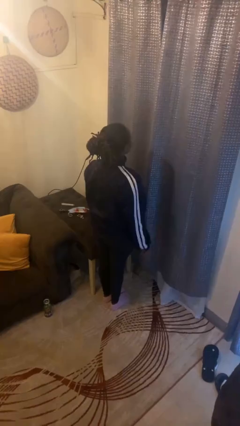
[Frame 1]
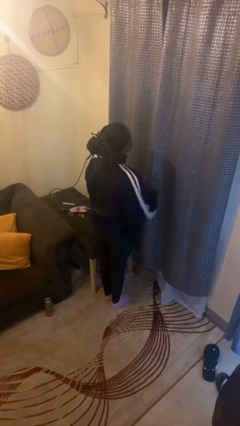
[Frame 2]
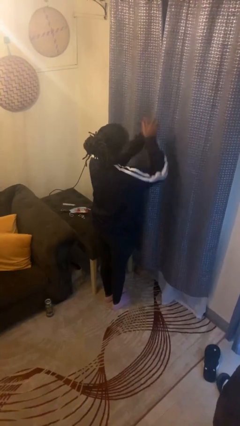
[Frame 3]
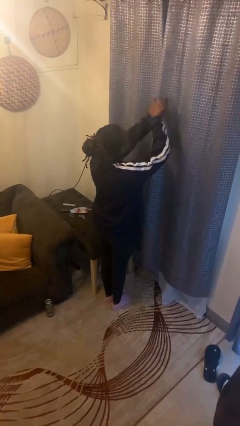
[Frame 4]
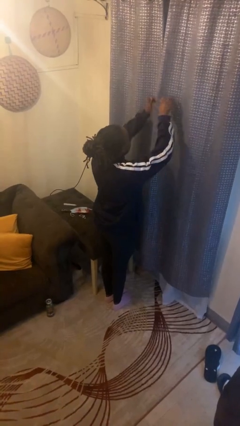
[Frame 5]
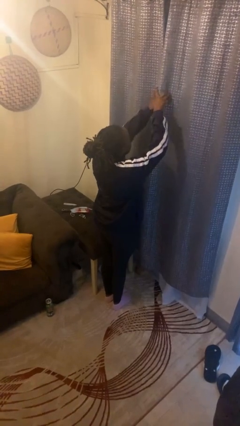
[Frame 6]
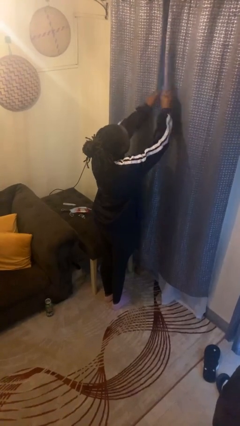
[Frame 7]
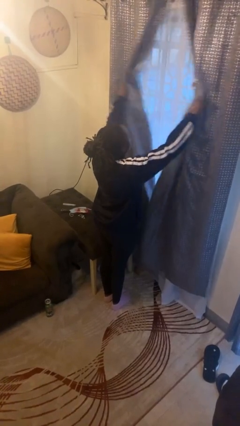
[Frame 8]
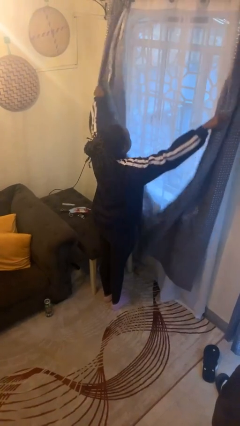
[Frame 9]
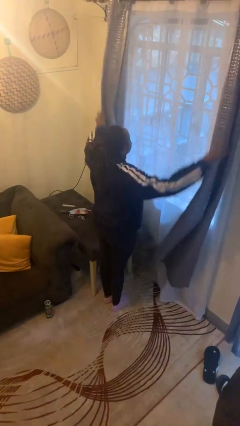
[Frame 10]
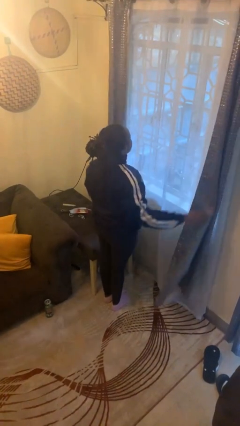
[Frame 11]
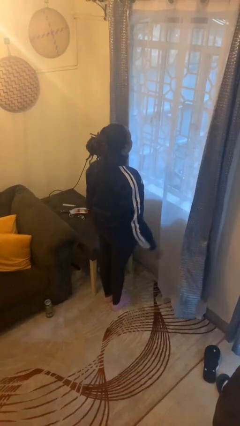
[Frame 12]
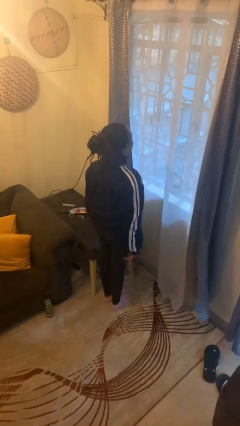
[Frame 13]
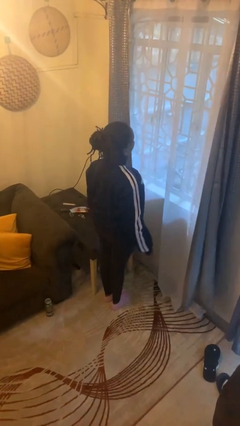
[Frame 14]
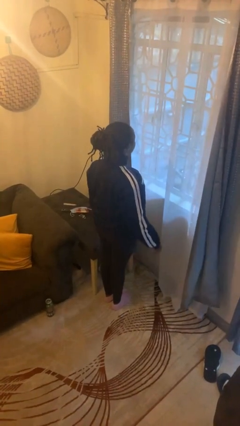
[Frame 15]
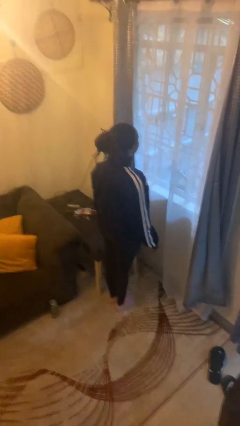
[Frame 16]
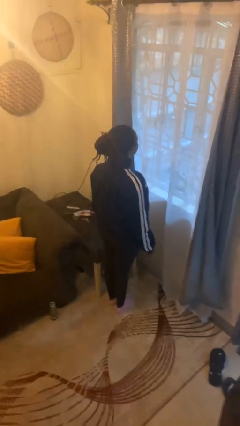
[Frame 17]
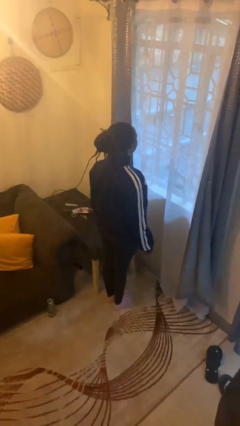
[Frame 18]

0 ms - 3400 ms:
person opens curtains

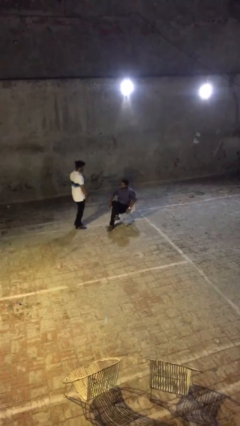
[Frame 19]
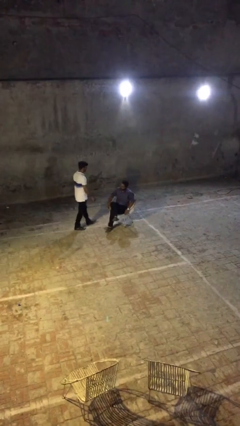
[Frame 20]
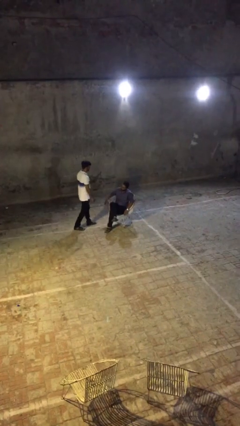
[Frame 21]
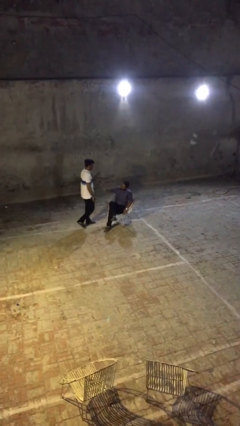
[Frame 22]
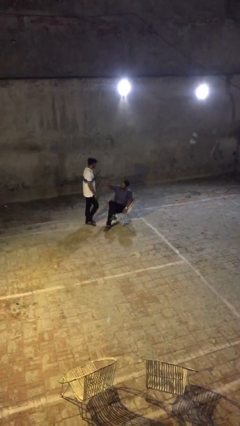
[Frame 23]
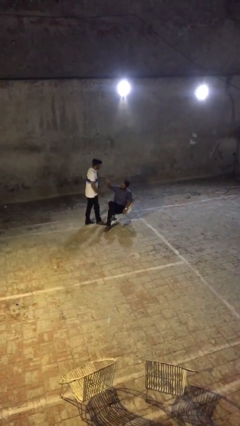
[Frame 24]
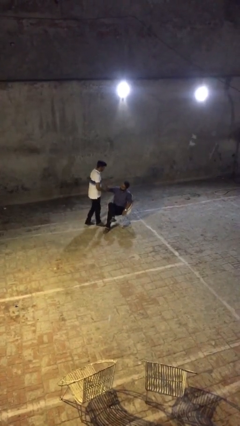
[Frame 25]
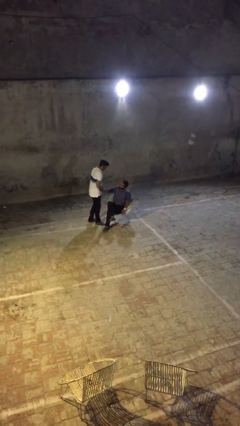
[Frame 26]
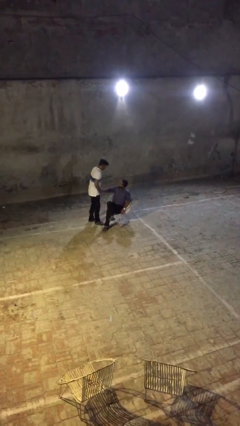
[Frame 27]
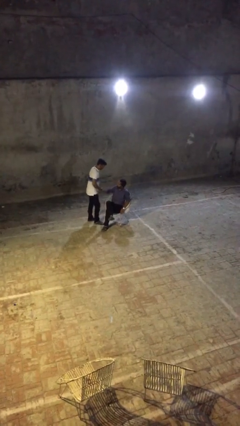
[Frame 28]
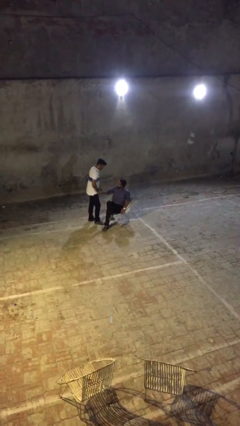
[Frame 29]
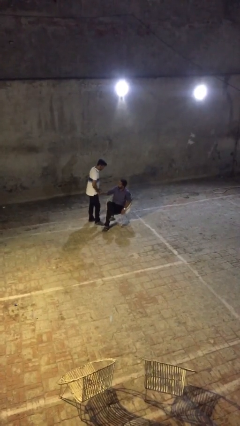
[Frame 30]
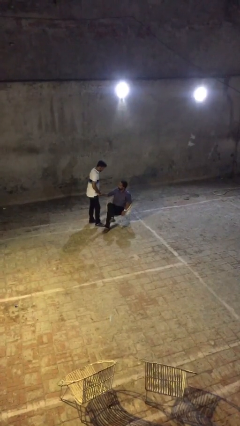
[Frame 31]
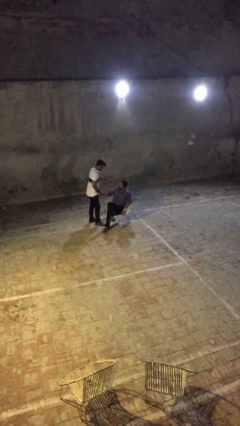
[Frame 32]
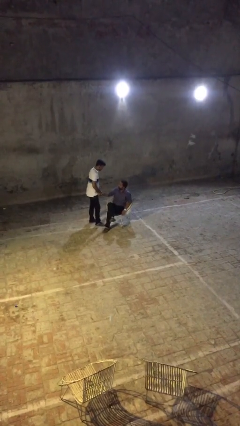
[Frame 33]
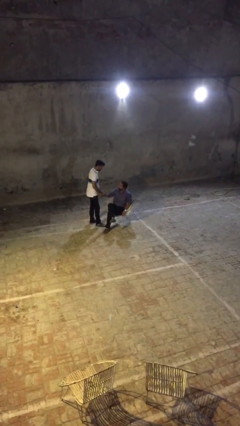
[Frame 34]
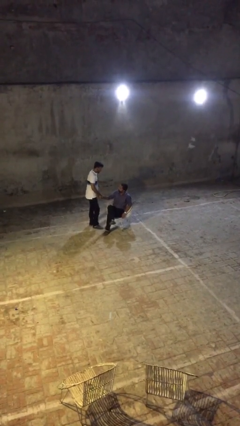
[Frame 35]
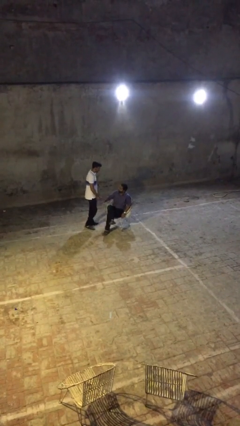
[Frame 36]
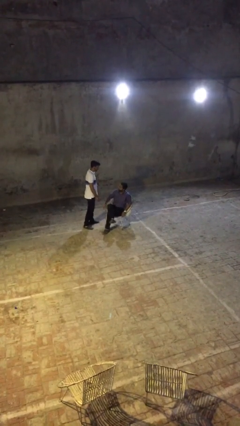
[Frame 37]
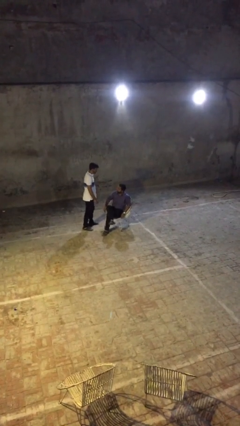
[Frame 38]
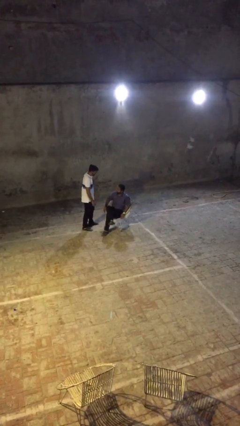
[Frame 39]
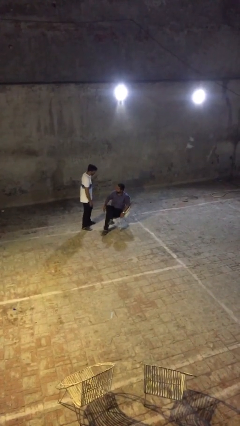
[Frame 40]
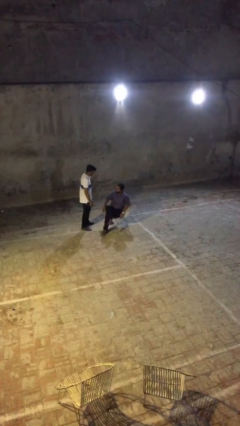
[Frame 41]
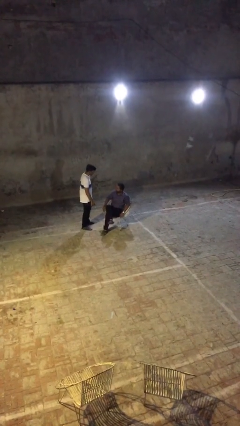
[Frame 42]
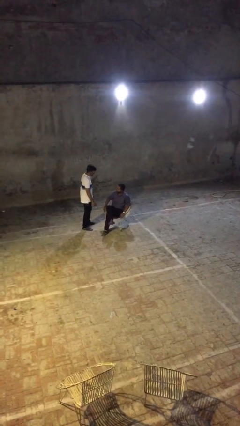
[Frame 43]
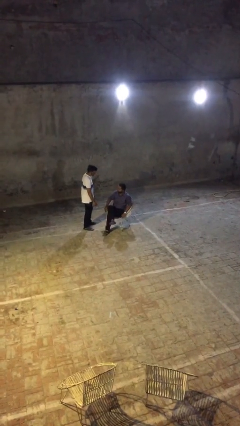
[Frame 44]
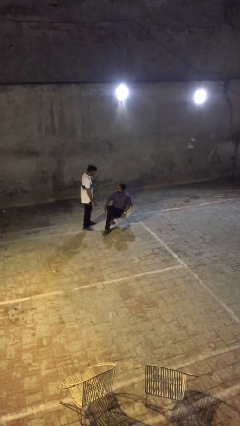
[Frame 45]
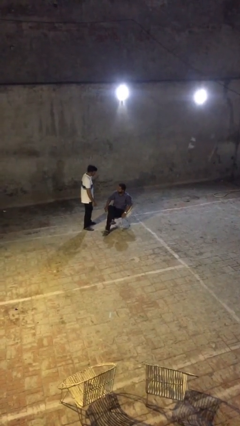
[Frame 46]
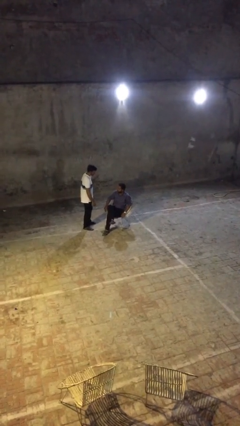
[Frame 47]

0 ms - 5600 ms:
person shakes hand

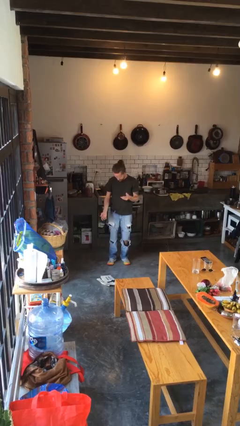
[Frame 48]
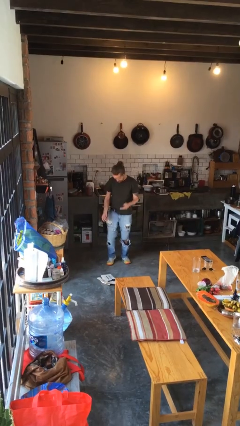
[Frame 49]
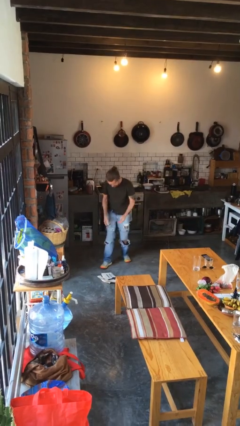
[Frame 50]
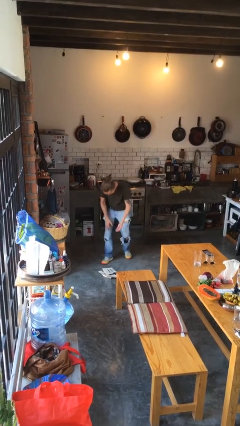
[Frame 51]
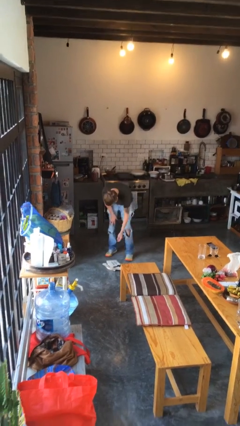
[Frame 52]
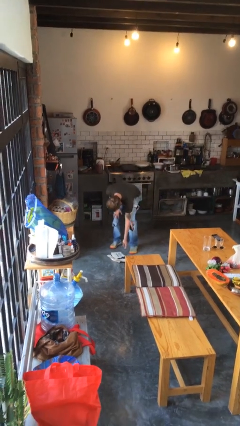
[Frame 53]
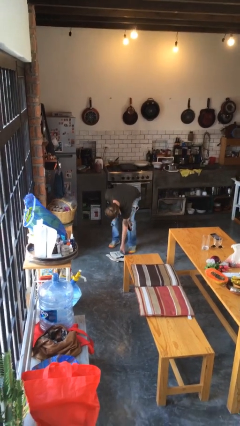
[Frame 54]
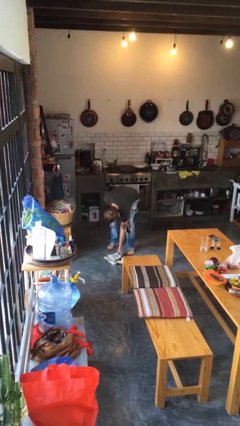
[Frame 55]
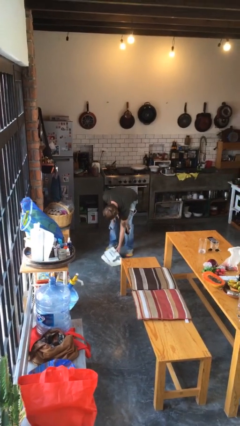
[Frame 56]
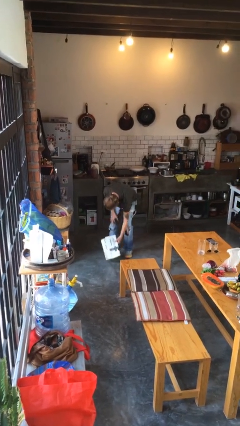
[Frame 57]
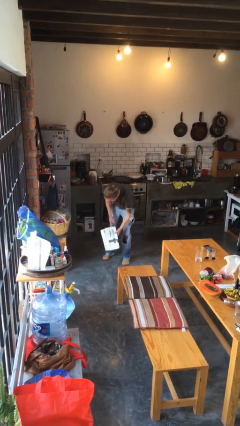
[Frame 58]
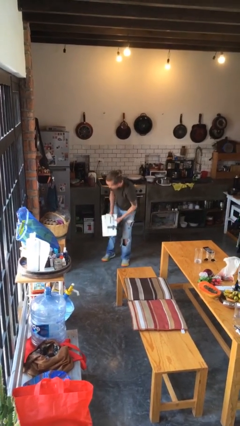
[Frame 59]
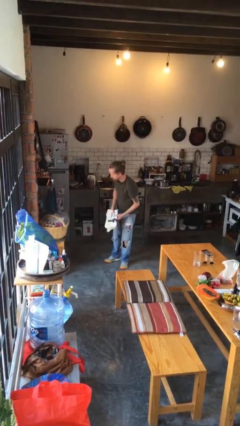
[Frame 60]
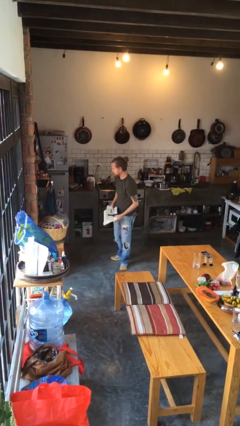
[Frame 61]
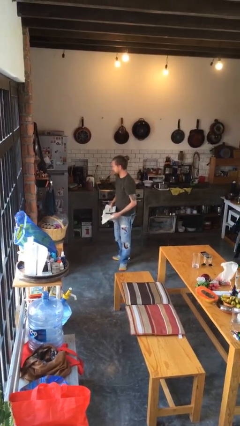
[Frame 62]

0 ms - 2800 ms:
person picks up object from floor

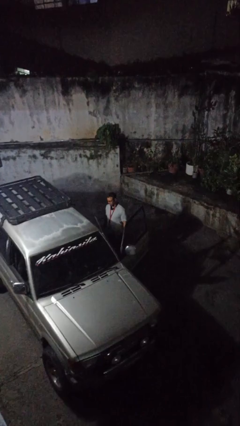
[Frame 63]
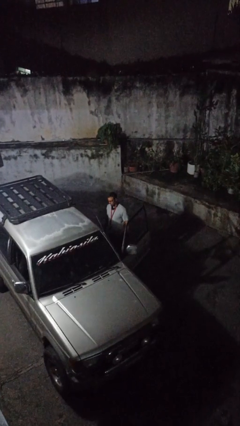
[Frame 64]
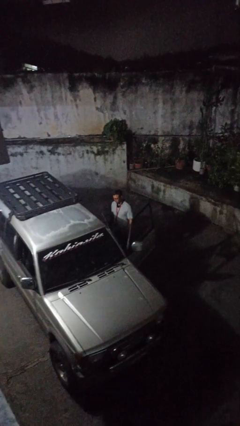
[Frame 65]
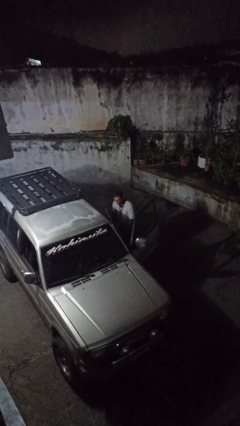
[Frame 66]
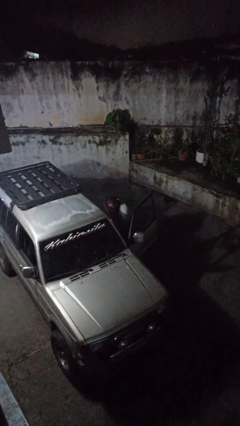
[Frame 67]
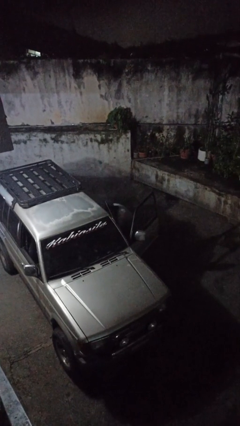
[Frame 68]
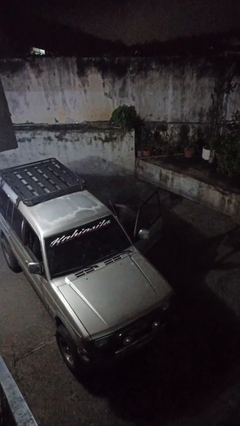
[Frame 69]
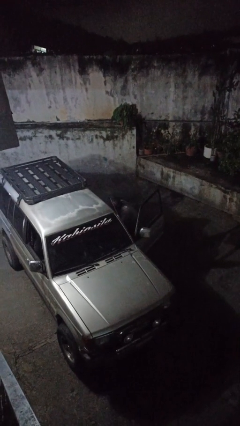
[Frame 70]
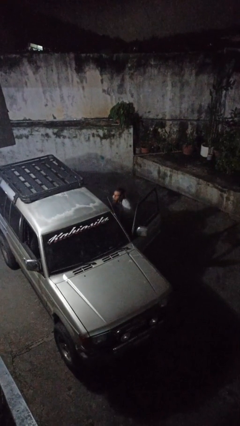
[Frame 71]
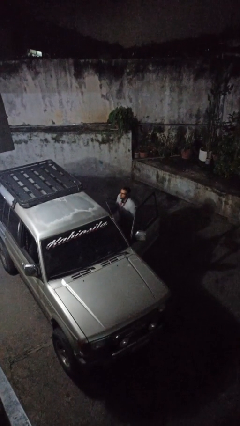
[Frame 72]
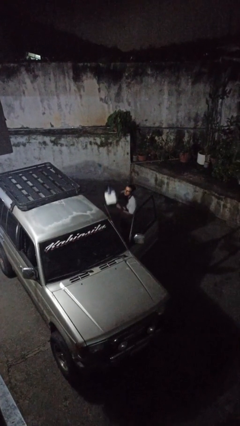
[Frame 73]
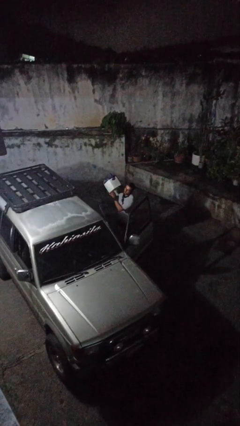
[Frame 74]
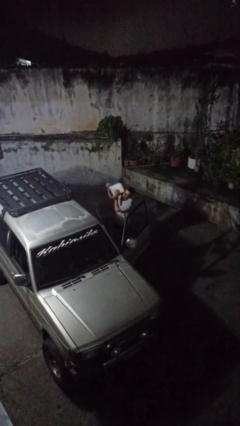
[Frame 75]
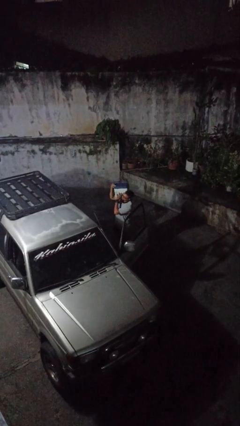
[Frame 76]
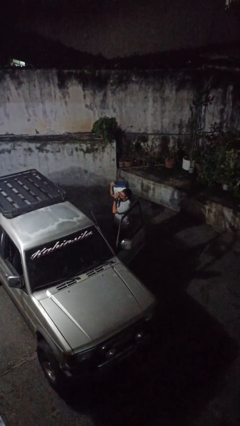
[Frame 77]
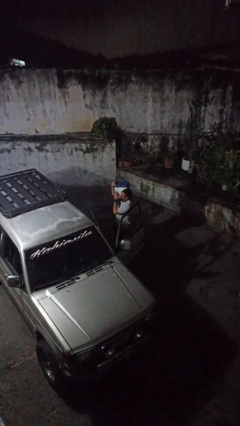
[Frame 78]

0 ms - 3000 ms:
person unloads car

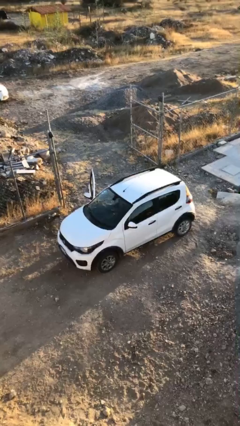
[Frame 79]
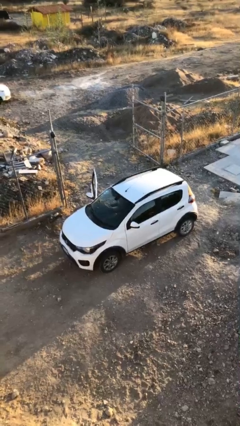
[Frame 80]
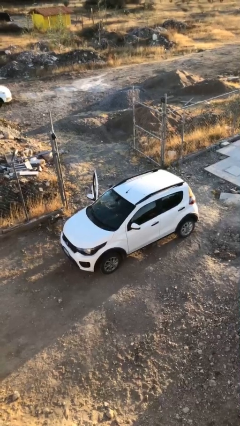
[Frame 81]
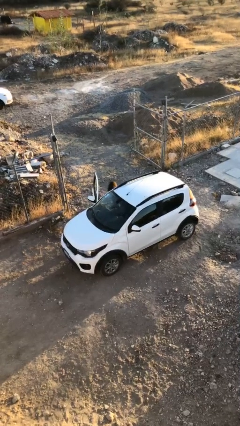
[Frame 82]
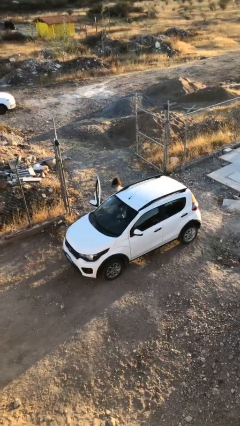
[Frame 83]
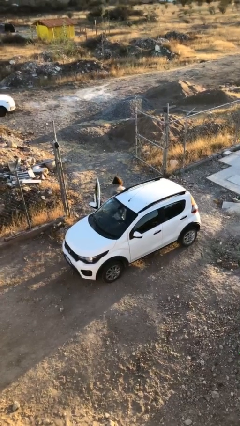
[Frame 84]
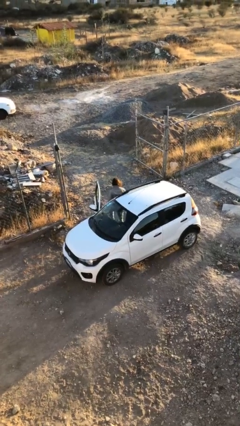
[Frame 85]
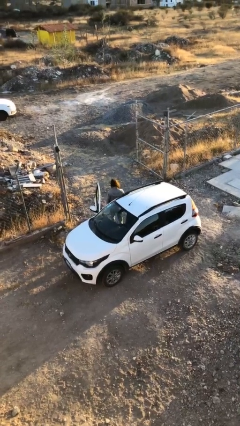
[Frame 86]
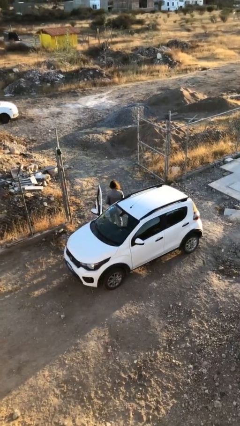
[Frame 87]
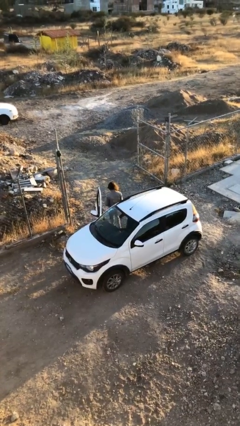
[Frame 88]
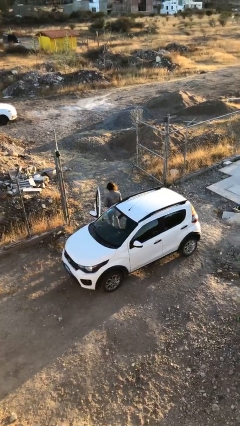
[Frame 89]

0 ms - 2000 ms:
person exits car

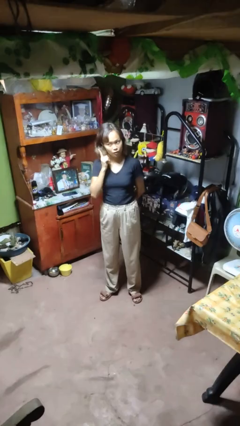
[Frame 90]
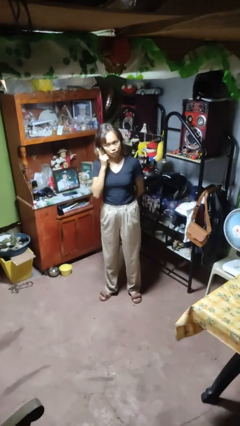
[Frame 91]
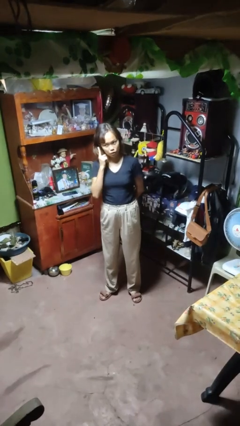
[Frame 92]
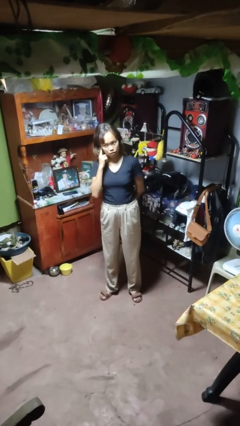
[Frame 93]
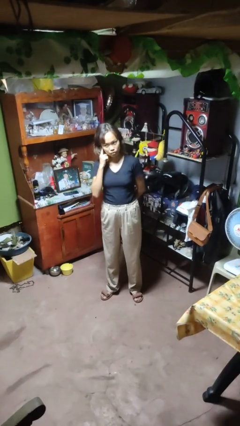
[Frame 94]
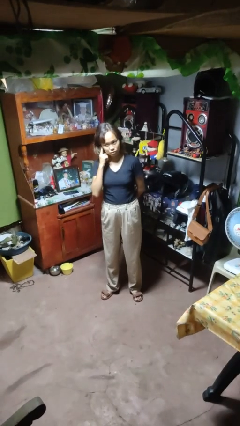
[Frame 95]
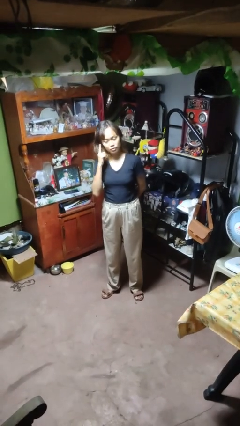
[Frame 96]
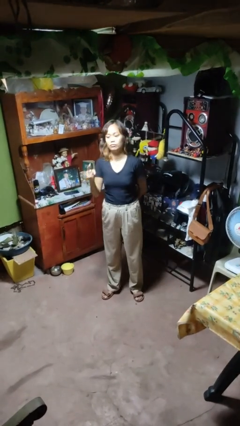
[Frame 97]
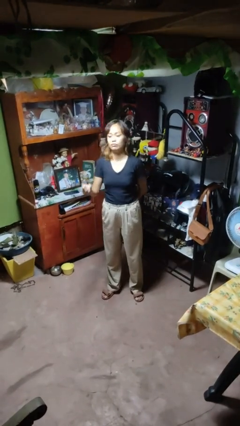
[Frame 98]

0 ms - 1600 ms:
person gestures listen closely
